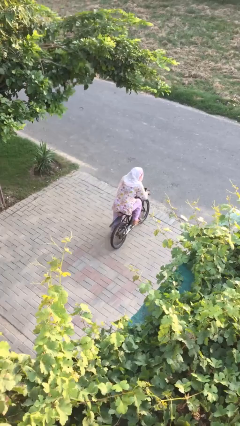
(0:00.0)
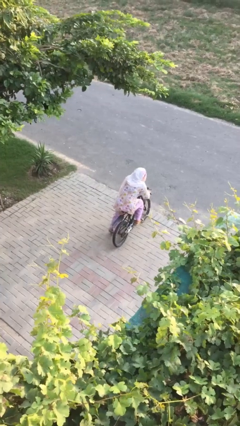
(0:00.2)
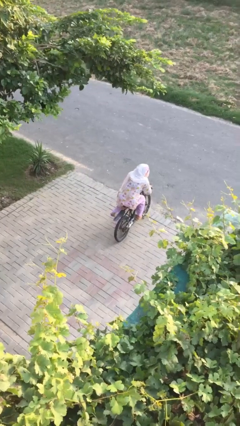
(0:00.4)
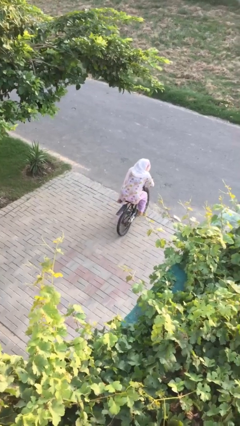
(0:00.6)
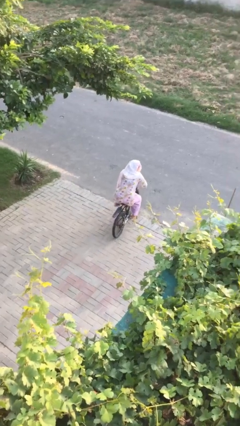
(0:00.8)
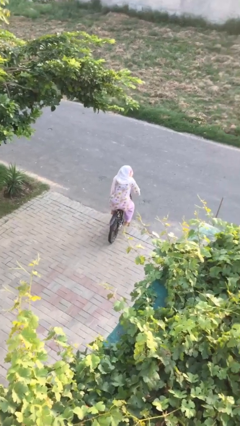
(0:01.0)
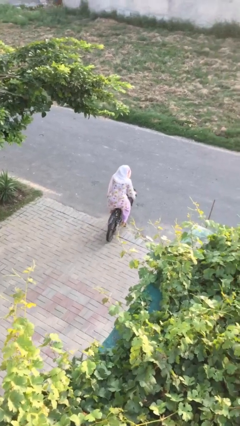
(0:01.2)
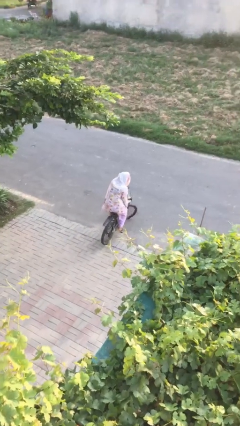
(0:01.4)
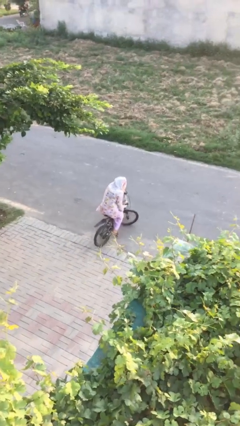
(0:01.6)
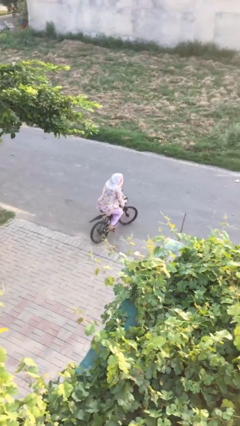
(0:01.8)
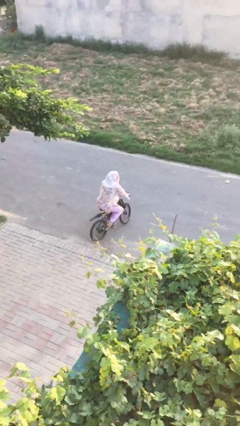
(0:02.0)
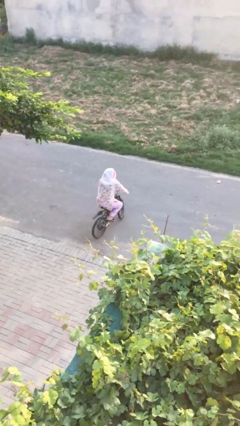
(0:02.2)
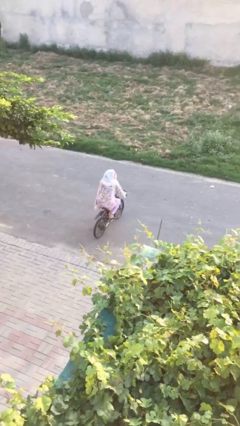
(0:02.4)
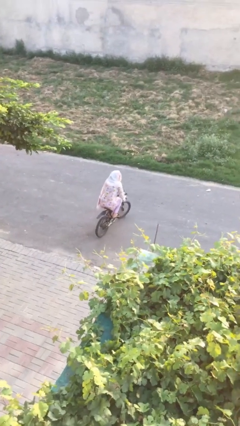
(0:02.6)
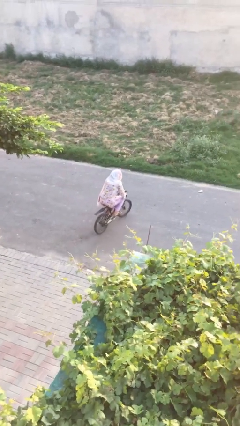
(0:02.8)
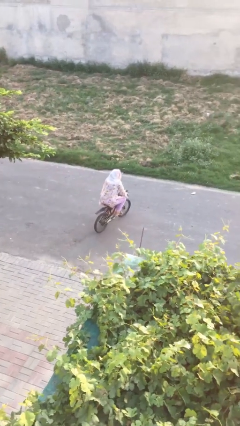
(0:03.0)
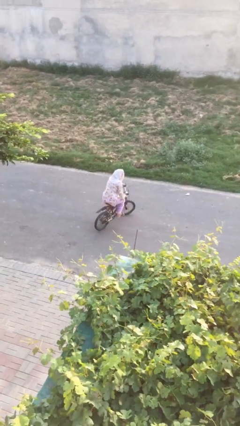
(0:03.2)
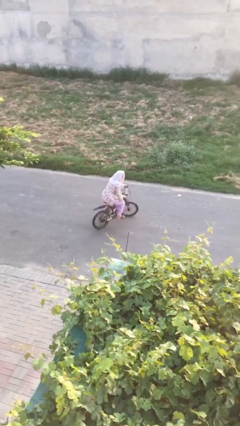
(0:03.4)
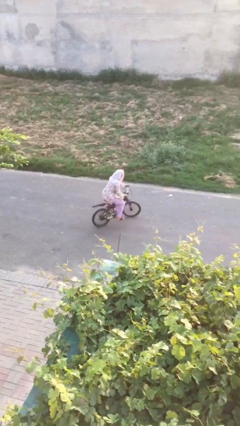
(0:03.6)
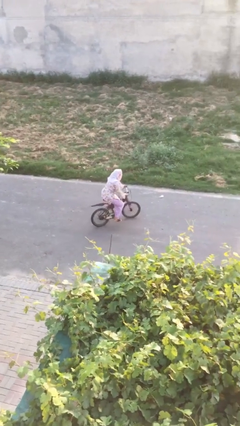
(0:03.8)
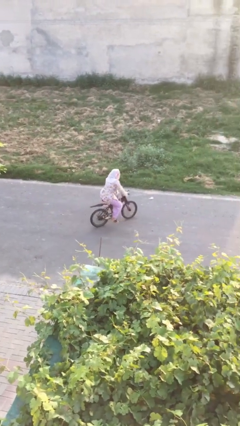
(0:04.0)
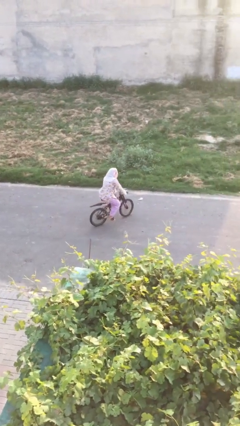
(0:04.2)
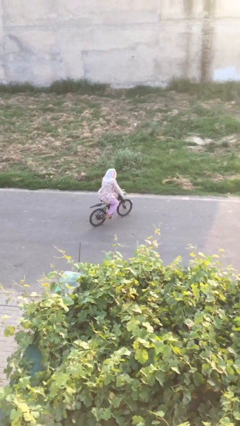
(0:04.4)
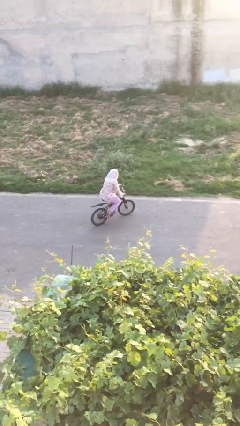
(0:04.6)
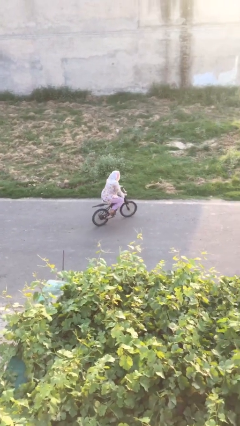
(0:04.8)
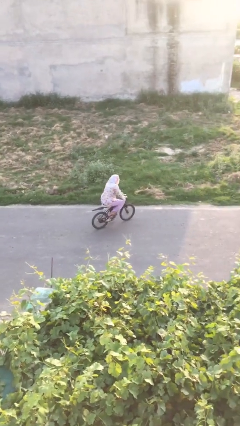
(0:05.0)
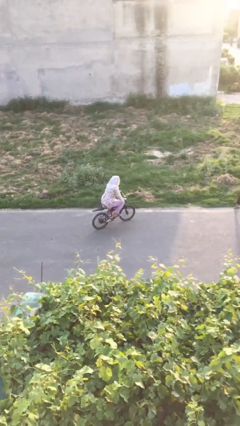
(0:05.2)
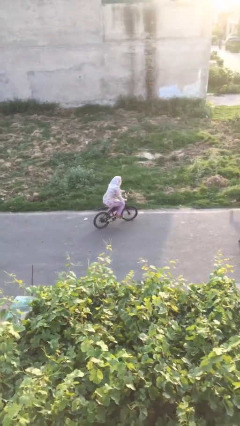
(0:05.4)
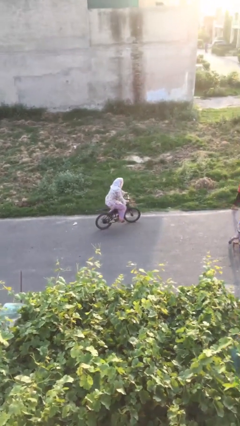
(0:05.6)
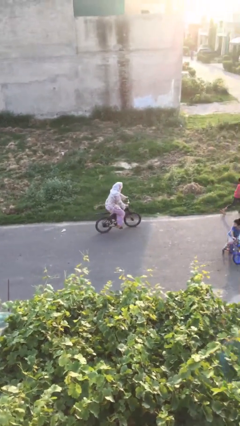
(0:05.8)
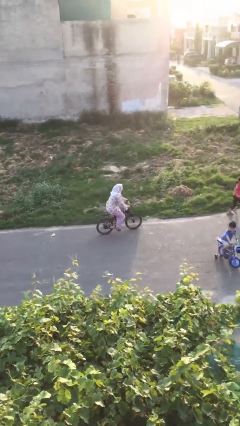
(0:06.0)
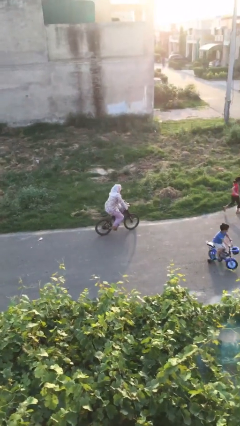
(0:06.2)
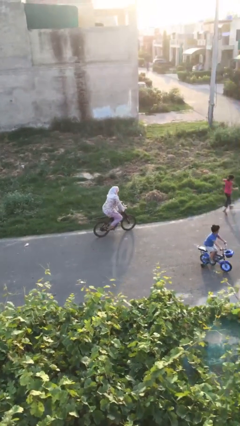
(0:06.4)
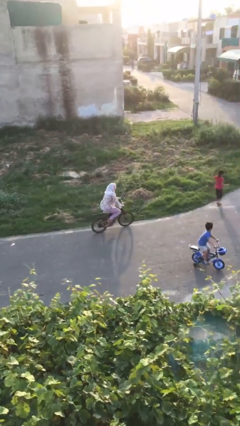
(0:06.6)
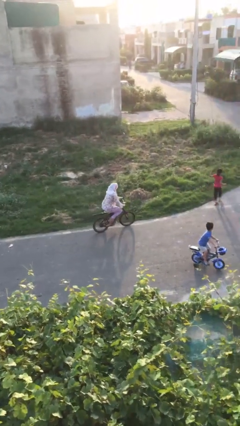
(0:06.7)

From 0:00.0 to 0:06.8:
person rides bicycle

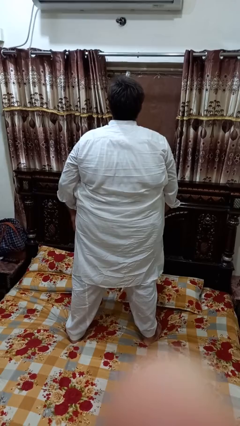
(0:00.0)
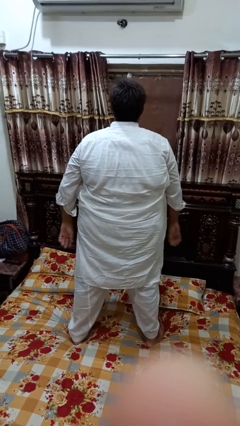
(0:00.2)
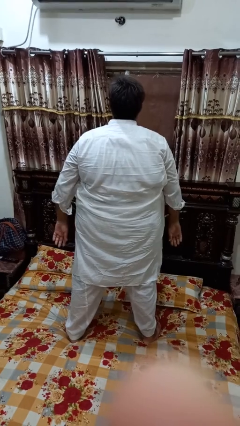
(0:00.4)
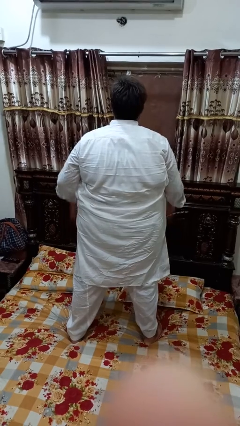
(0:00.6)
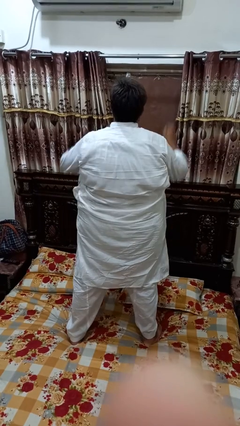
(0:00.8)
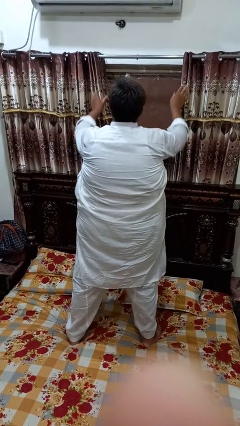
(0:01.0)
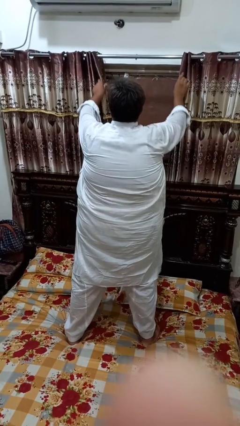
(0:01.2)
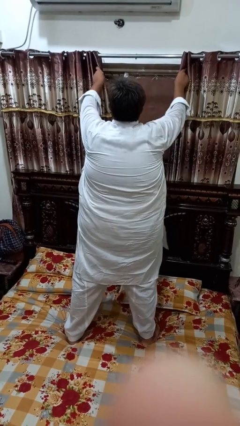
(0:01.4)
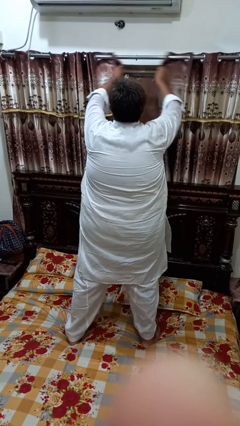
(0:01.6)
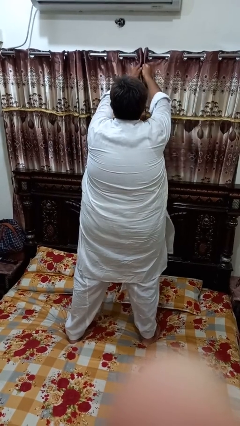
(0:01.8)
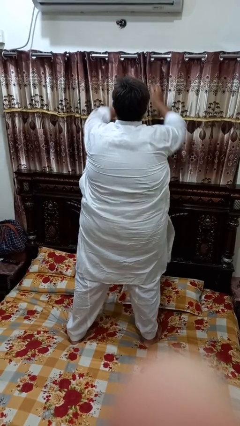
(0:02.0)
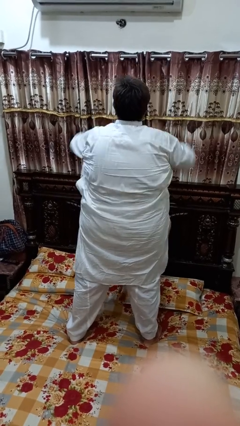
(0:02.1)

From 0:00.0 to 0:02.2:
person closes curtains

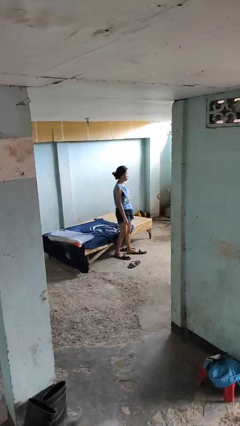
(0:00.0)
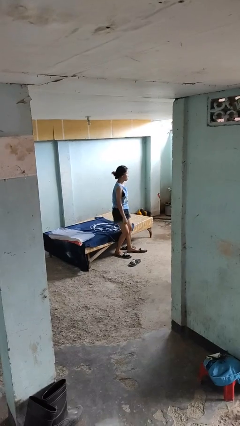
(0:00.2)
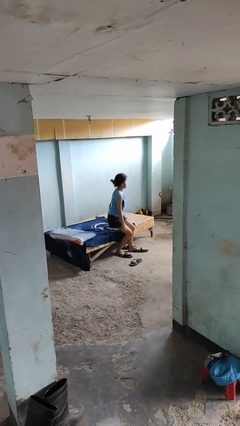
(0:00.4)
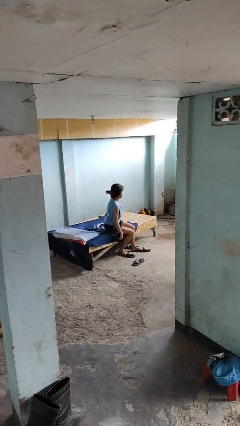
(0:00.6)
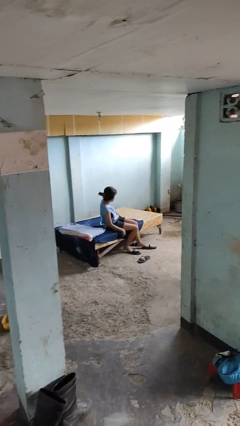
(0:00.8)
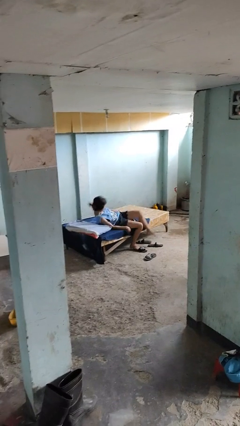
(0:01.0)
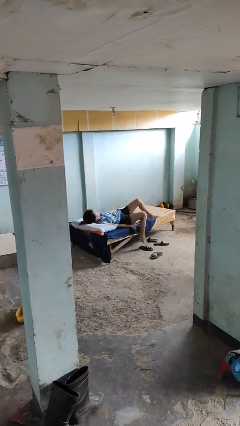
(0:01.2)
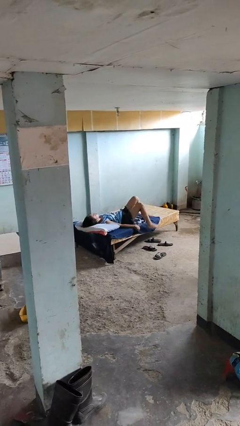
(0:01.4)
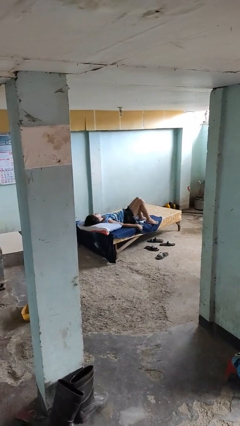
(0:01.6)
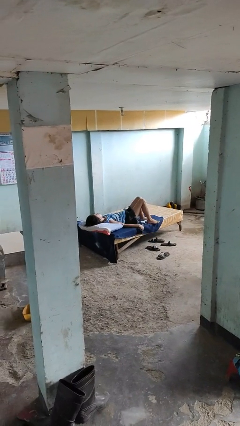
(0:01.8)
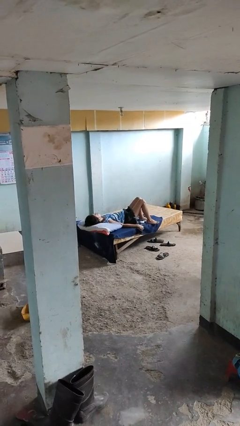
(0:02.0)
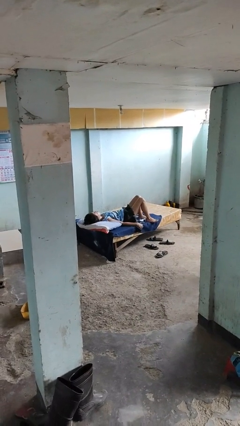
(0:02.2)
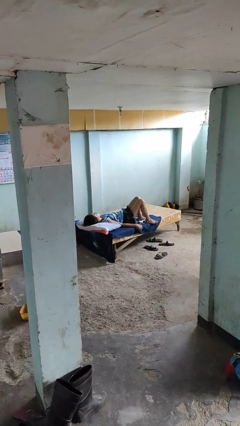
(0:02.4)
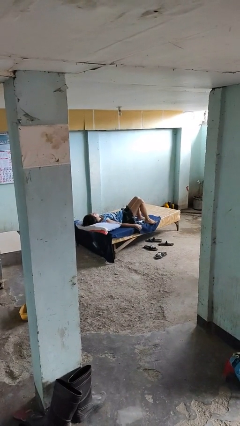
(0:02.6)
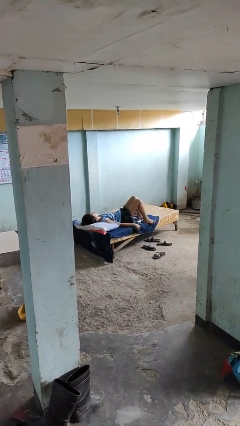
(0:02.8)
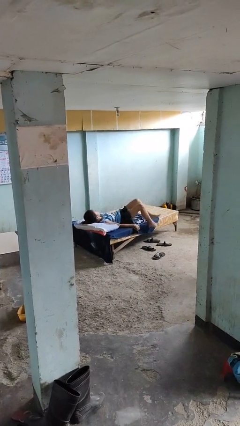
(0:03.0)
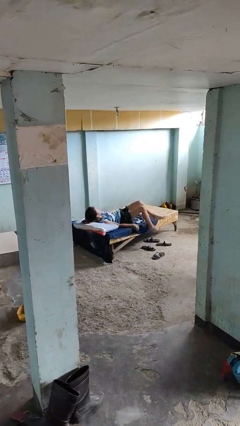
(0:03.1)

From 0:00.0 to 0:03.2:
person lies down on bed

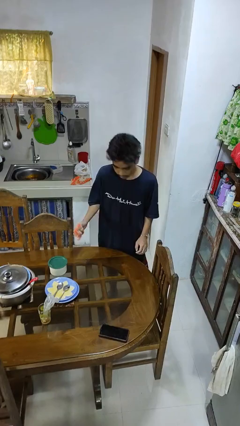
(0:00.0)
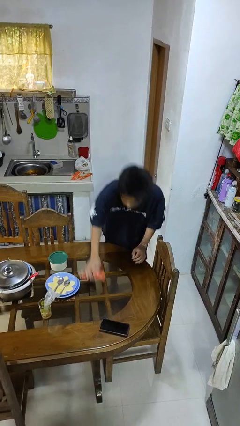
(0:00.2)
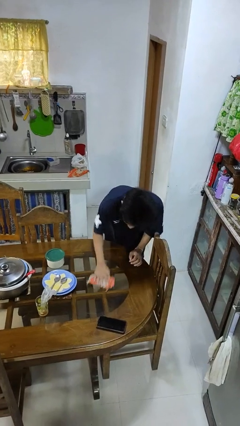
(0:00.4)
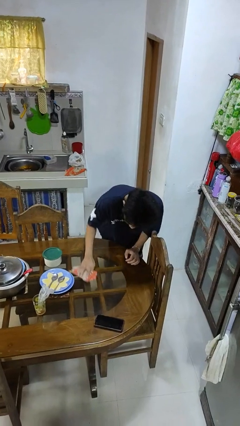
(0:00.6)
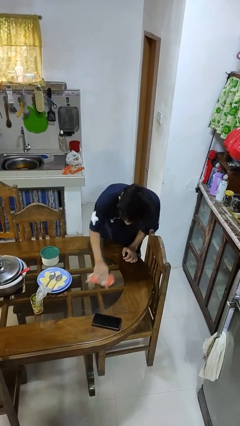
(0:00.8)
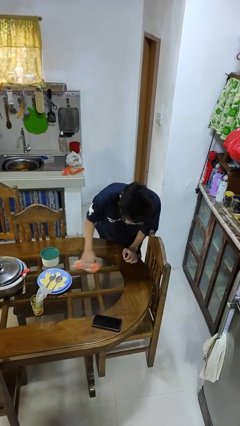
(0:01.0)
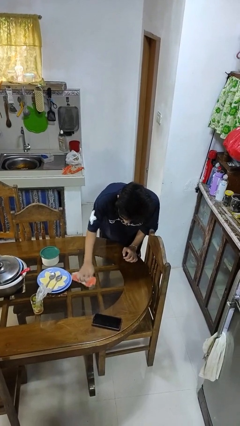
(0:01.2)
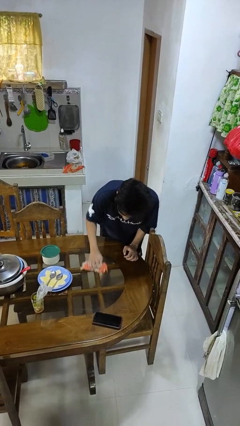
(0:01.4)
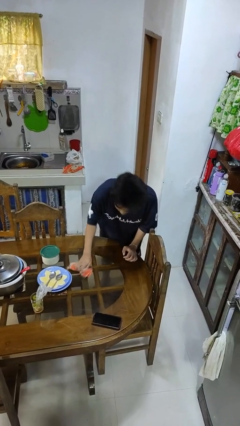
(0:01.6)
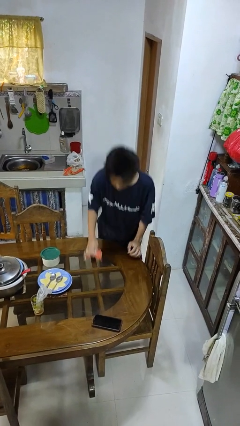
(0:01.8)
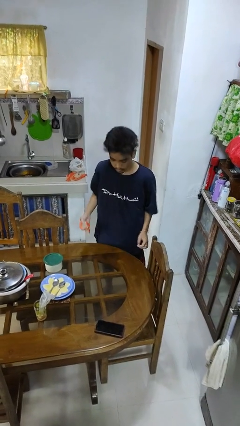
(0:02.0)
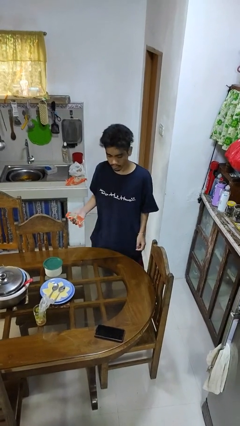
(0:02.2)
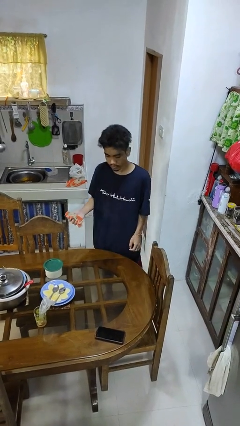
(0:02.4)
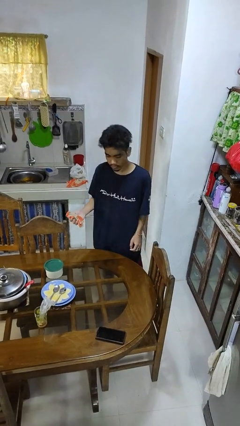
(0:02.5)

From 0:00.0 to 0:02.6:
person cleans table with rag

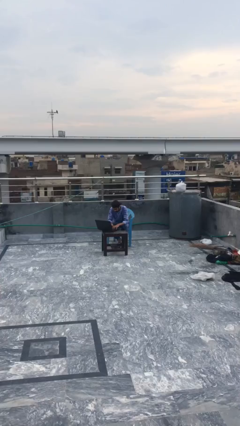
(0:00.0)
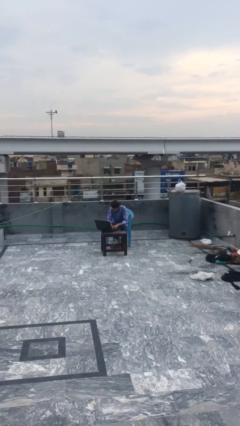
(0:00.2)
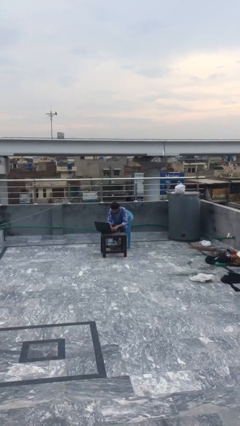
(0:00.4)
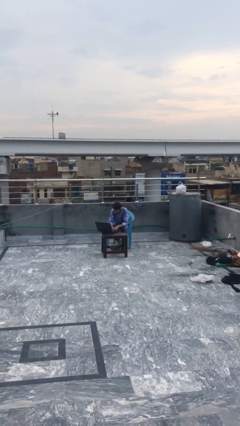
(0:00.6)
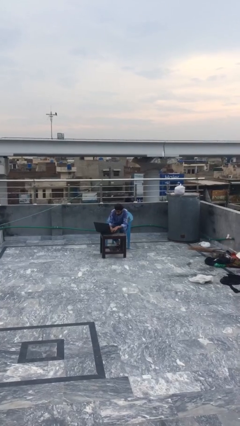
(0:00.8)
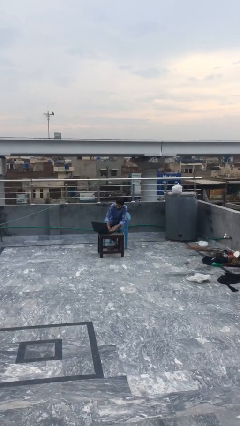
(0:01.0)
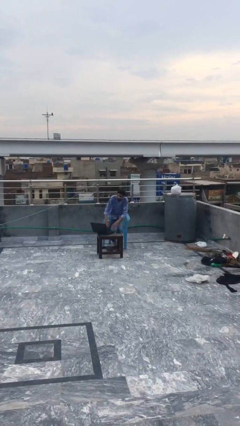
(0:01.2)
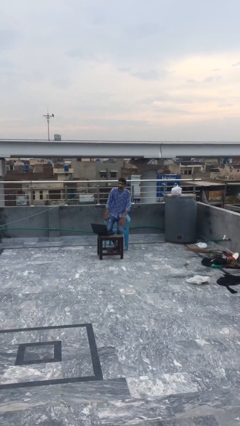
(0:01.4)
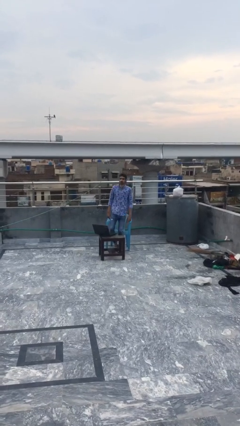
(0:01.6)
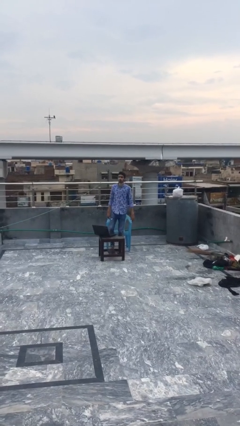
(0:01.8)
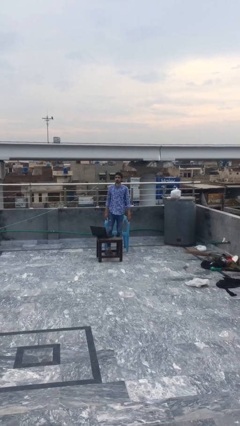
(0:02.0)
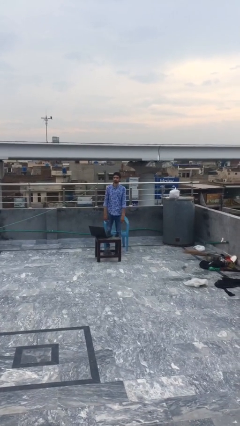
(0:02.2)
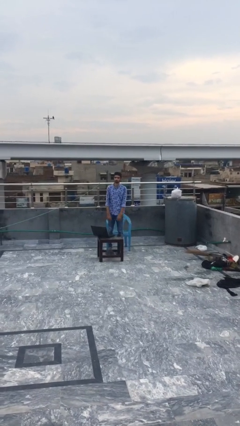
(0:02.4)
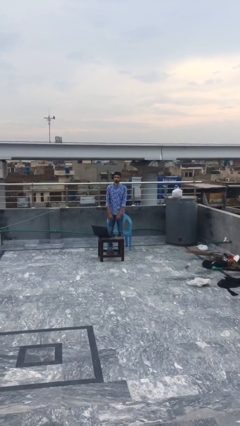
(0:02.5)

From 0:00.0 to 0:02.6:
person stands up
